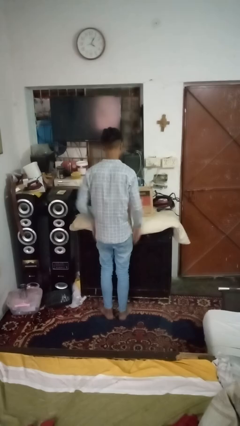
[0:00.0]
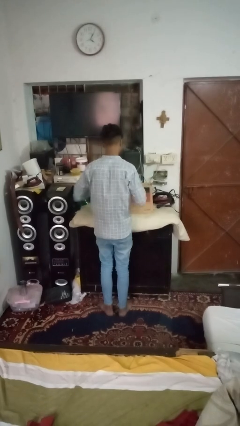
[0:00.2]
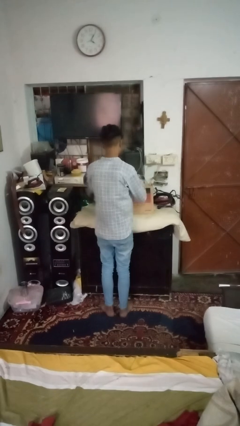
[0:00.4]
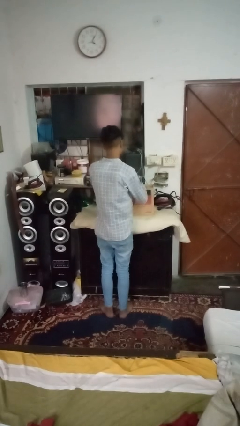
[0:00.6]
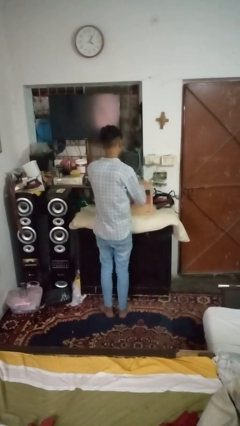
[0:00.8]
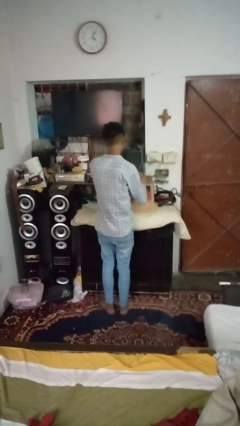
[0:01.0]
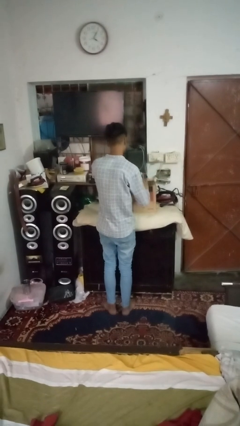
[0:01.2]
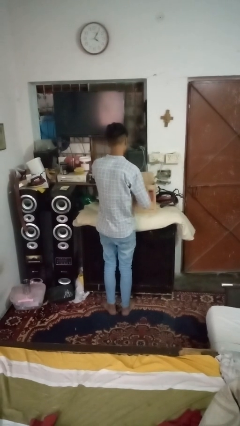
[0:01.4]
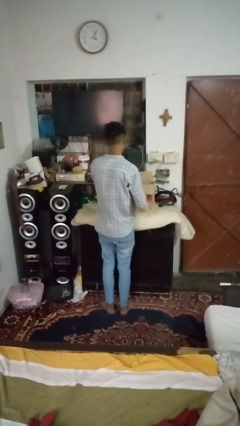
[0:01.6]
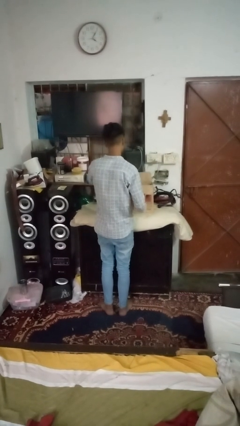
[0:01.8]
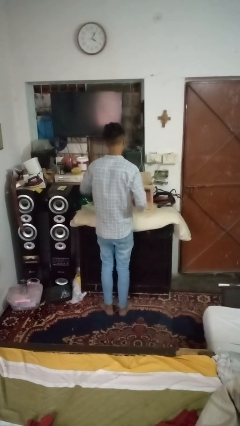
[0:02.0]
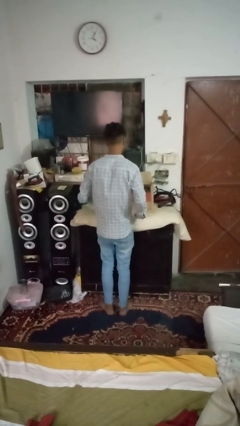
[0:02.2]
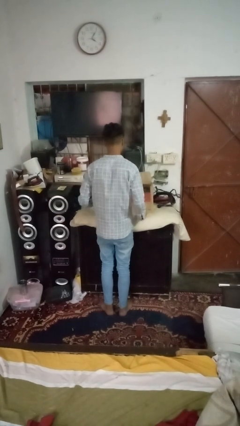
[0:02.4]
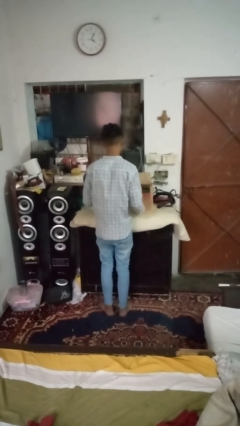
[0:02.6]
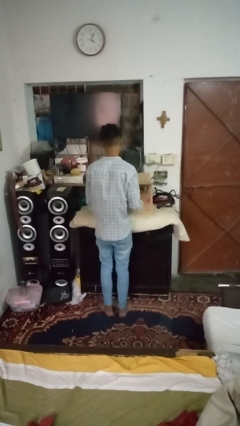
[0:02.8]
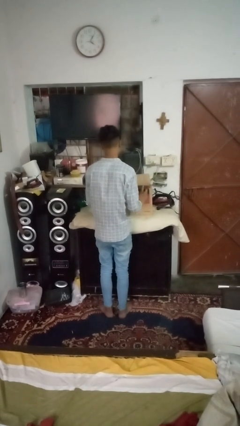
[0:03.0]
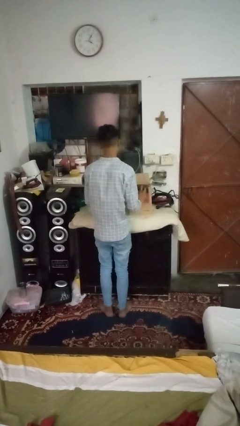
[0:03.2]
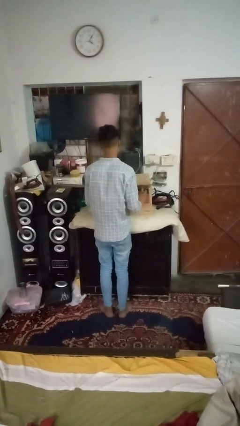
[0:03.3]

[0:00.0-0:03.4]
person opens box

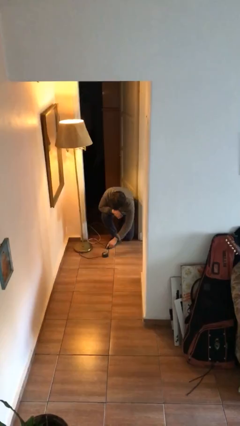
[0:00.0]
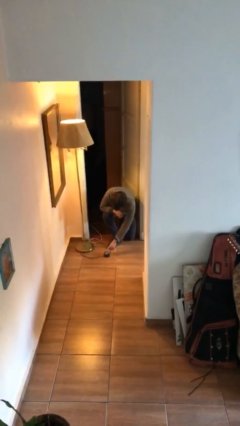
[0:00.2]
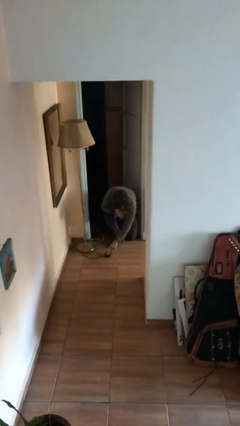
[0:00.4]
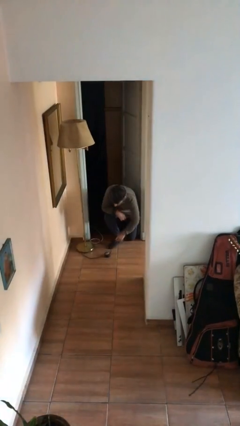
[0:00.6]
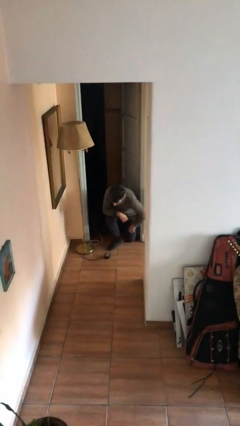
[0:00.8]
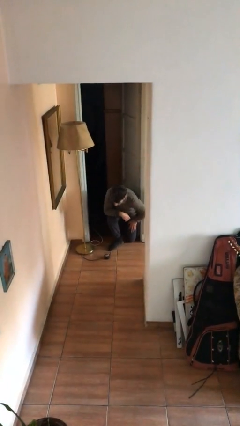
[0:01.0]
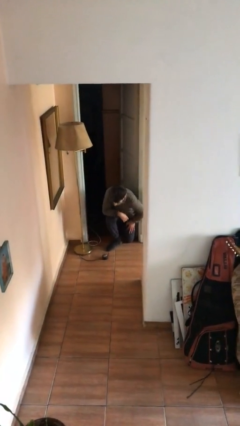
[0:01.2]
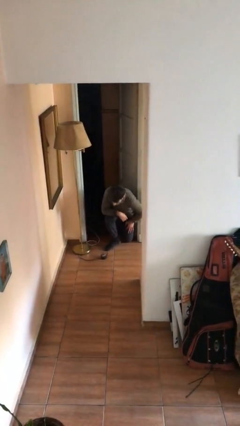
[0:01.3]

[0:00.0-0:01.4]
person turns off lamp

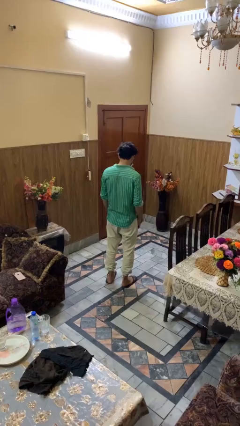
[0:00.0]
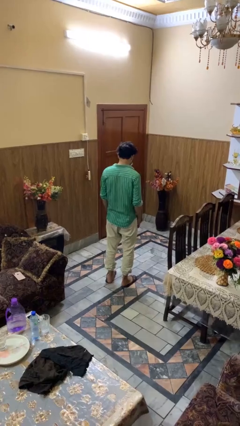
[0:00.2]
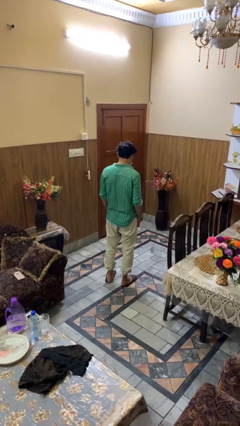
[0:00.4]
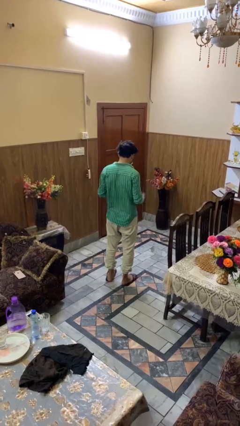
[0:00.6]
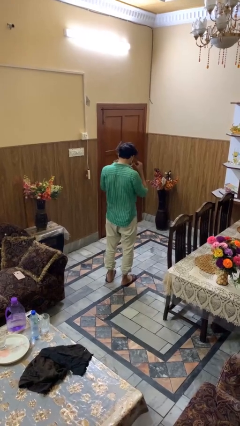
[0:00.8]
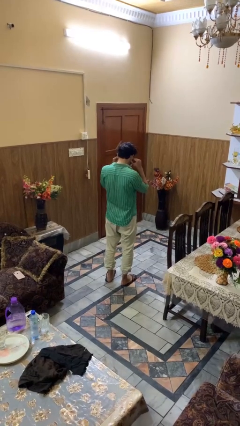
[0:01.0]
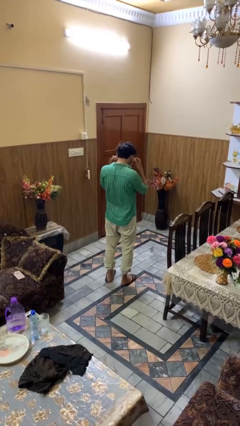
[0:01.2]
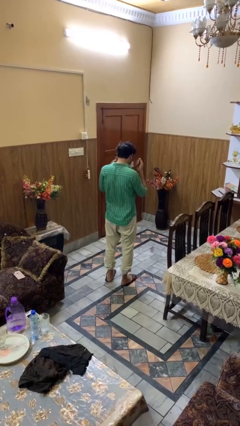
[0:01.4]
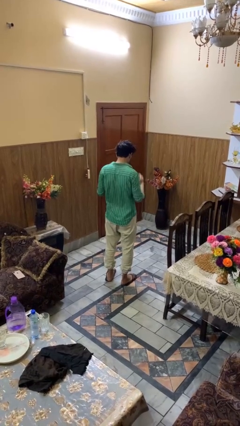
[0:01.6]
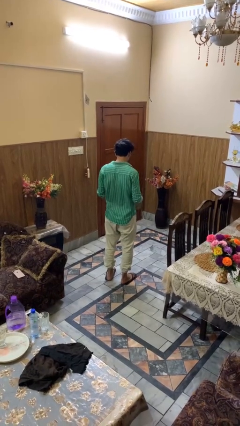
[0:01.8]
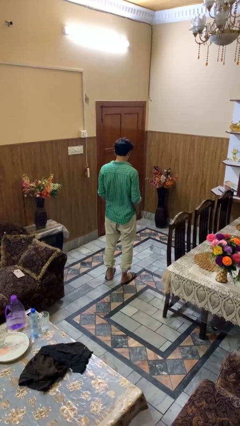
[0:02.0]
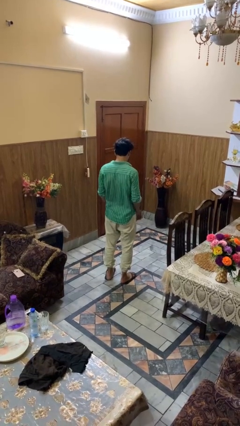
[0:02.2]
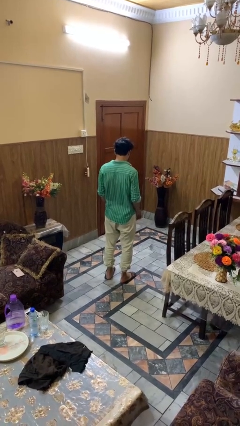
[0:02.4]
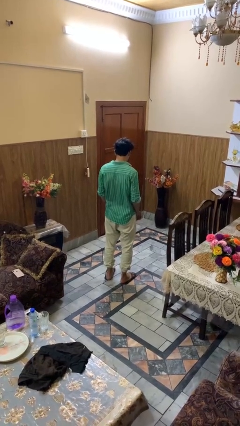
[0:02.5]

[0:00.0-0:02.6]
person takes off facemask

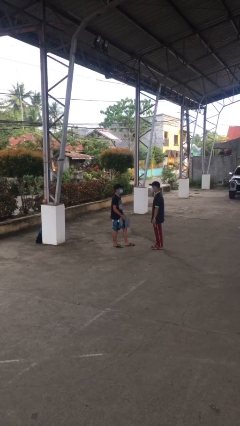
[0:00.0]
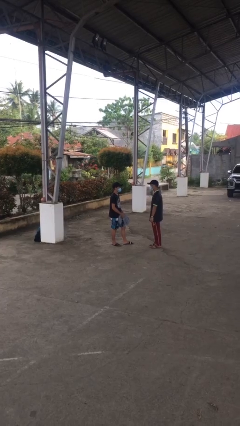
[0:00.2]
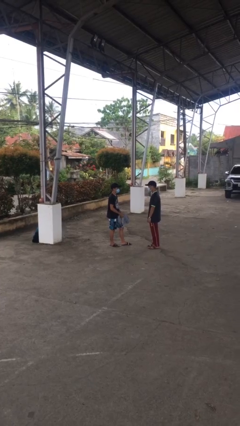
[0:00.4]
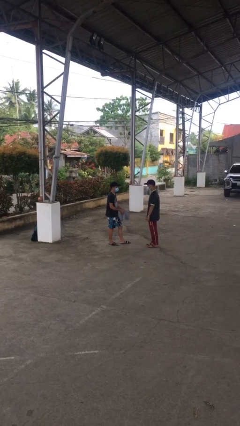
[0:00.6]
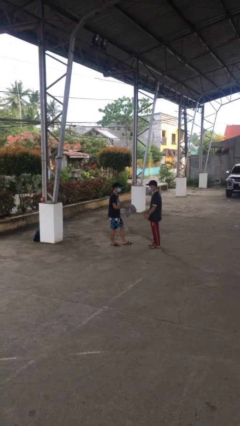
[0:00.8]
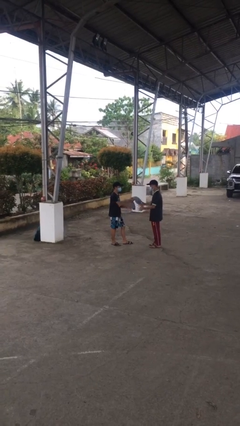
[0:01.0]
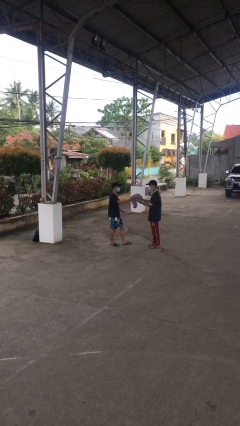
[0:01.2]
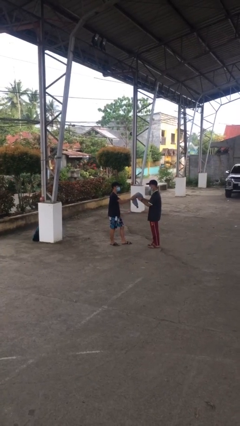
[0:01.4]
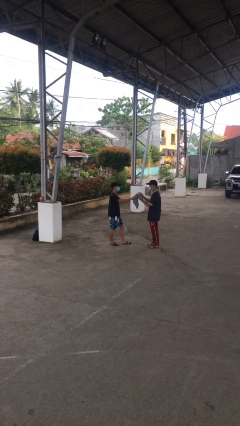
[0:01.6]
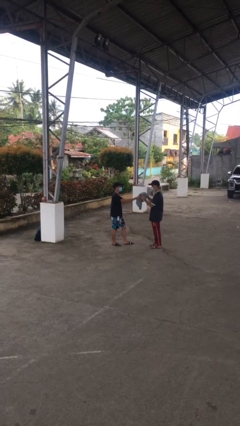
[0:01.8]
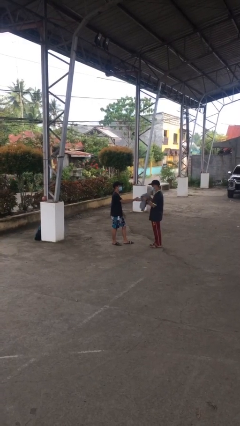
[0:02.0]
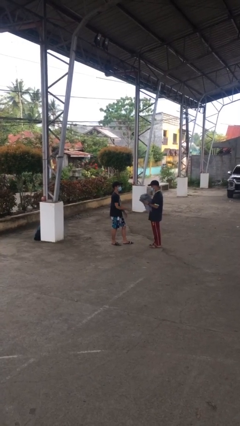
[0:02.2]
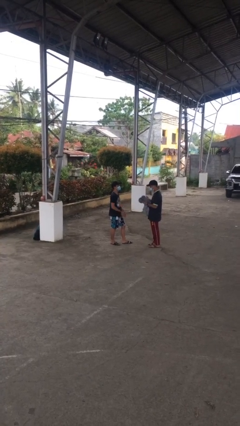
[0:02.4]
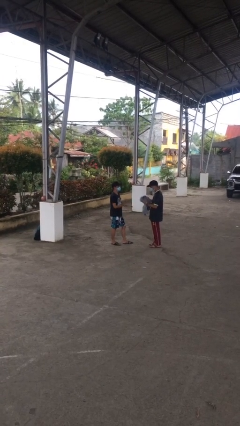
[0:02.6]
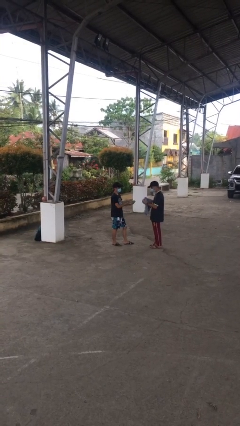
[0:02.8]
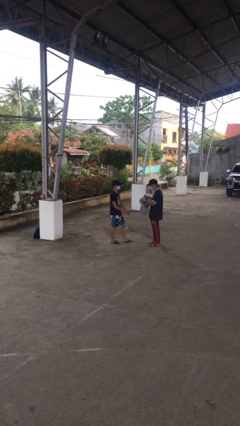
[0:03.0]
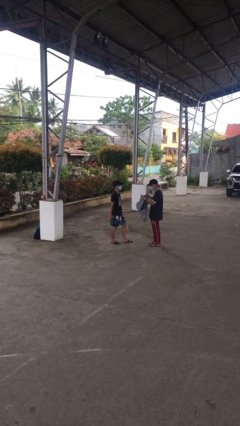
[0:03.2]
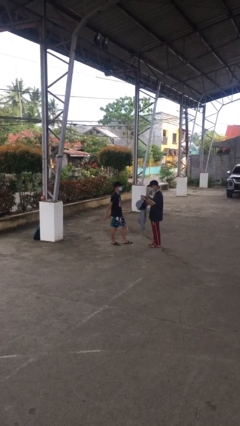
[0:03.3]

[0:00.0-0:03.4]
person transfers object to person

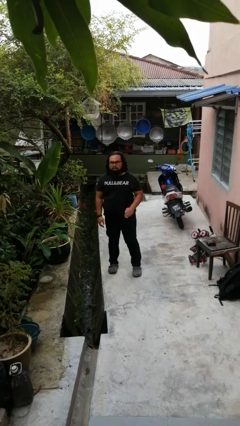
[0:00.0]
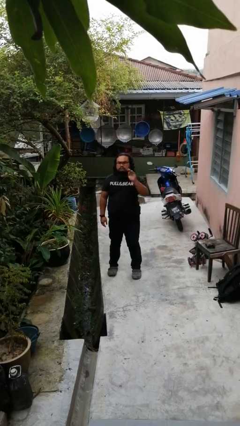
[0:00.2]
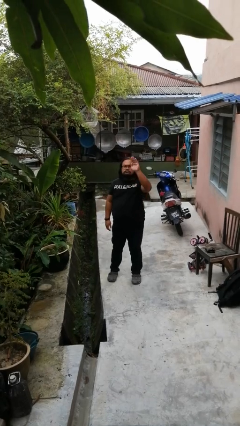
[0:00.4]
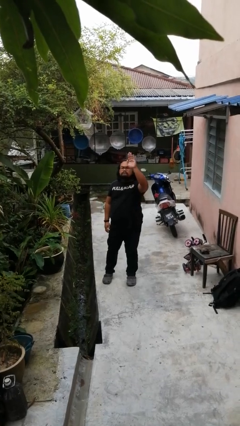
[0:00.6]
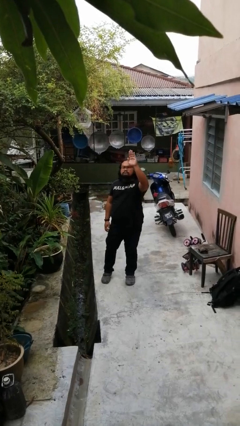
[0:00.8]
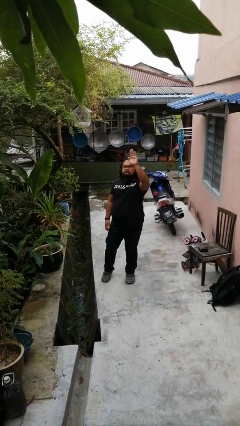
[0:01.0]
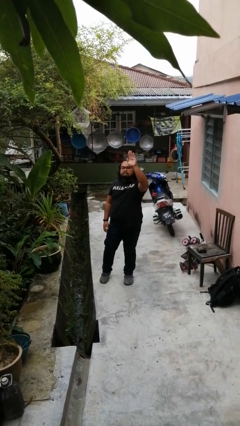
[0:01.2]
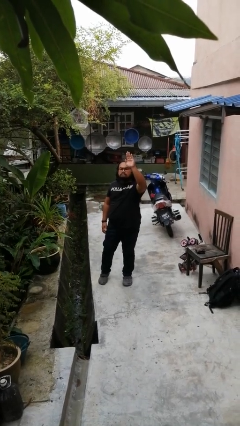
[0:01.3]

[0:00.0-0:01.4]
person gestures raise hand

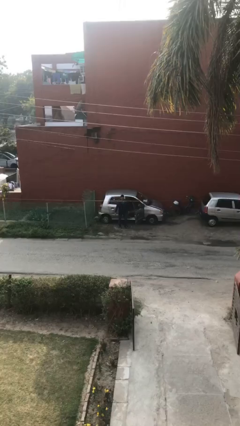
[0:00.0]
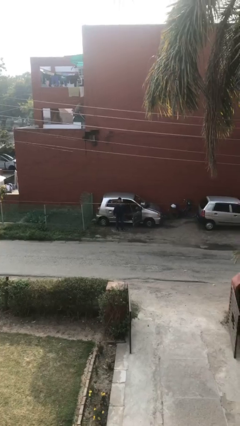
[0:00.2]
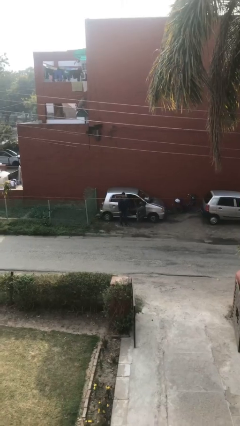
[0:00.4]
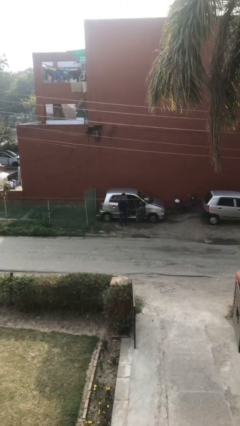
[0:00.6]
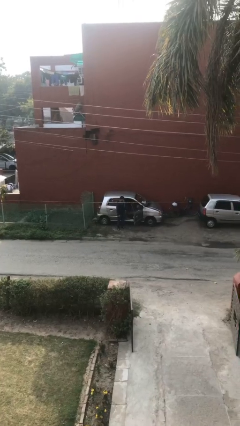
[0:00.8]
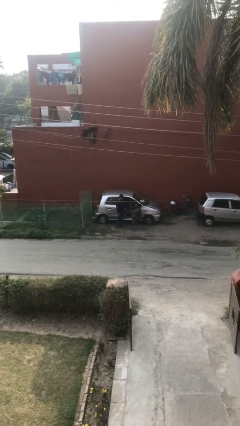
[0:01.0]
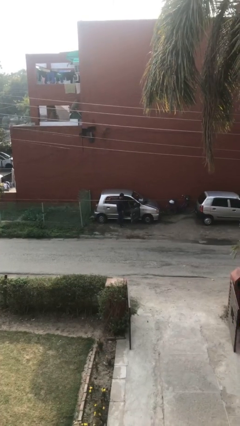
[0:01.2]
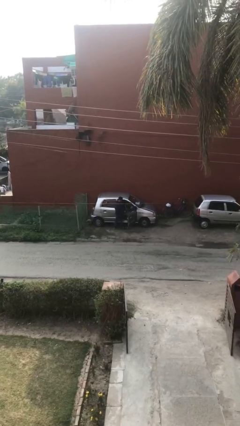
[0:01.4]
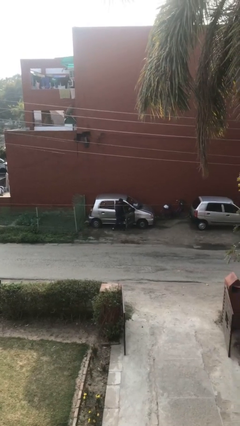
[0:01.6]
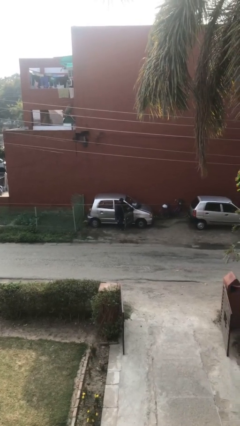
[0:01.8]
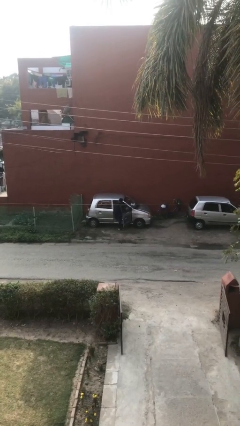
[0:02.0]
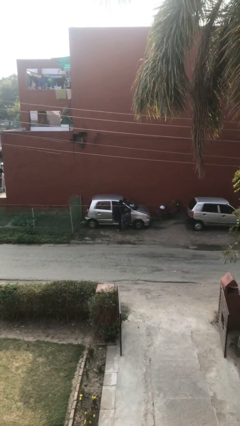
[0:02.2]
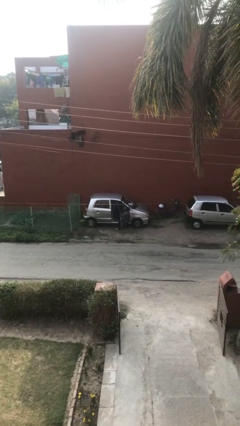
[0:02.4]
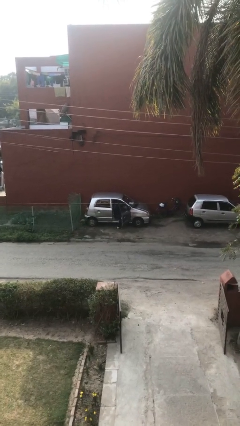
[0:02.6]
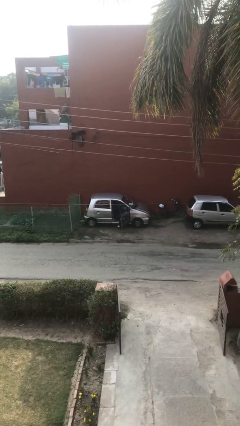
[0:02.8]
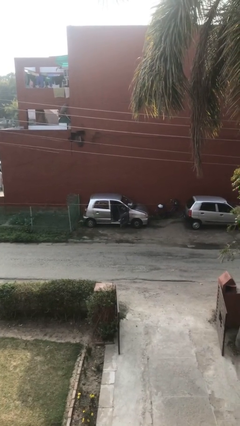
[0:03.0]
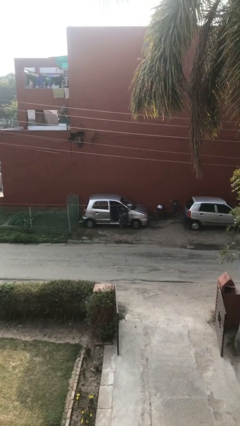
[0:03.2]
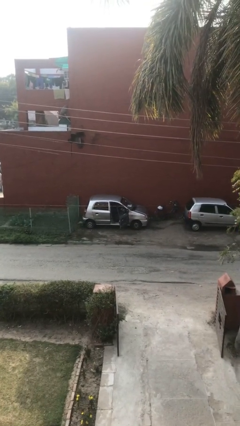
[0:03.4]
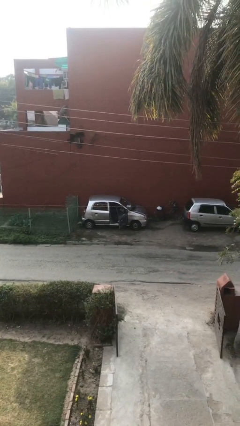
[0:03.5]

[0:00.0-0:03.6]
person enters car

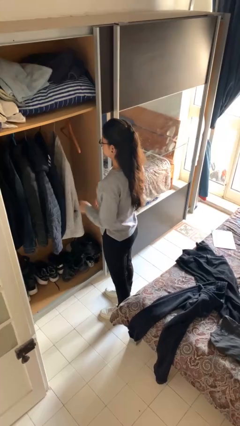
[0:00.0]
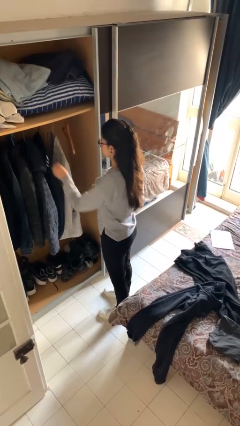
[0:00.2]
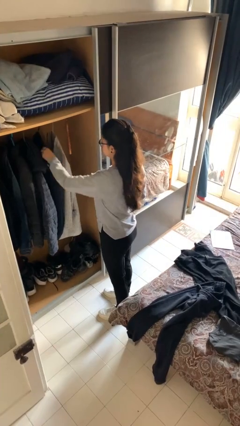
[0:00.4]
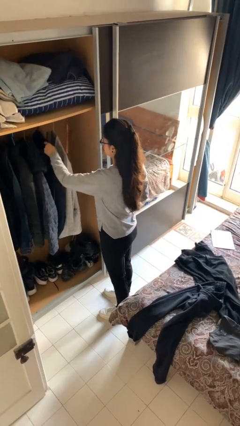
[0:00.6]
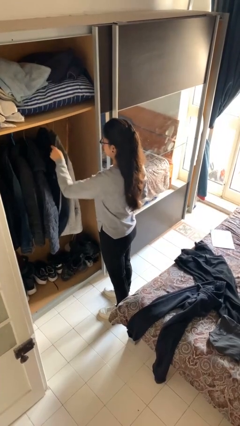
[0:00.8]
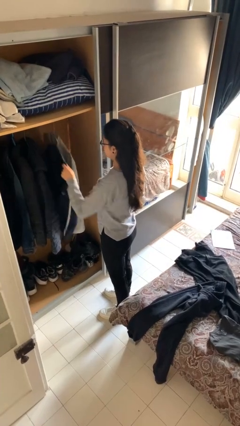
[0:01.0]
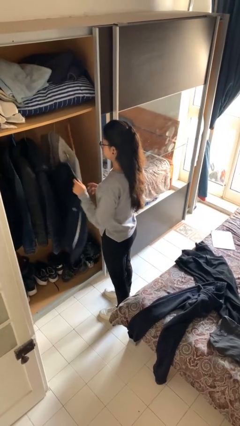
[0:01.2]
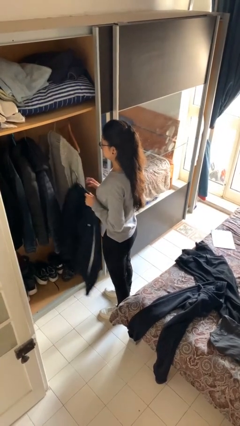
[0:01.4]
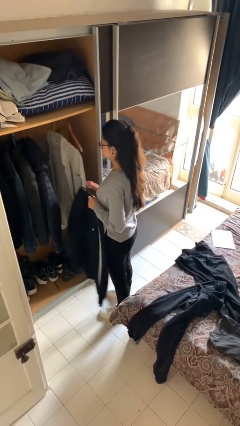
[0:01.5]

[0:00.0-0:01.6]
person takes clothes from closet
